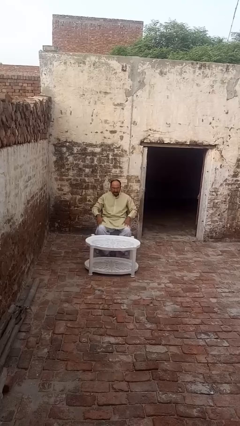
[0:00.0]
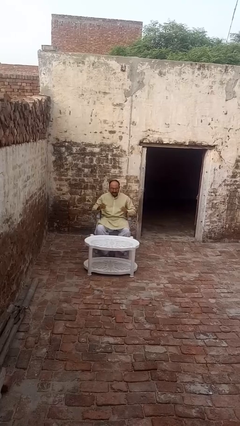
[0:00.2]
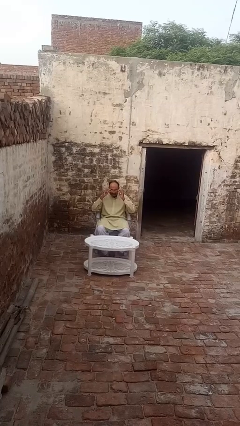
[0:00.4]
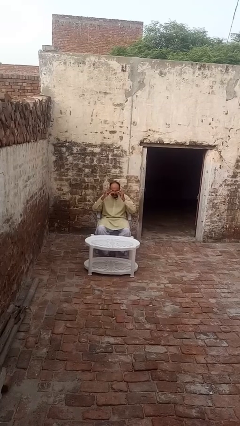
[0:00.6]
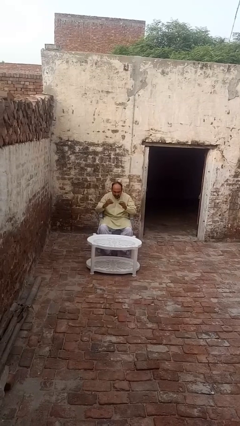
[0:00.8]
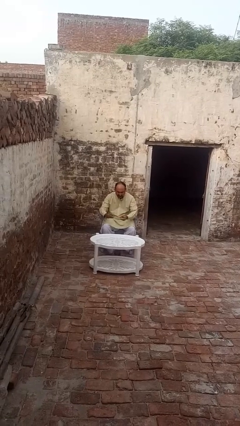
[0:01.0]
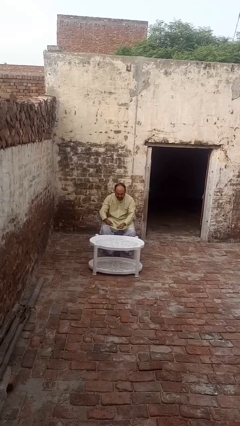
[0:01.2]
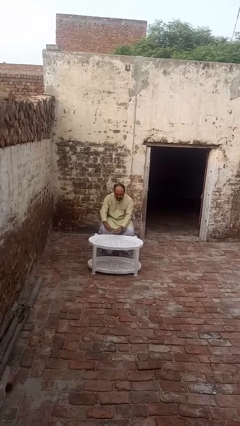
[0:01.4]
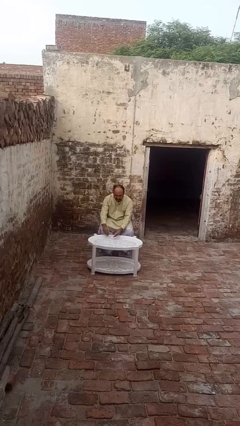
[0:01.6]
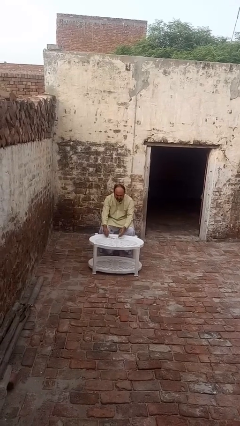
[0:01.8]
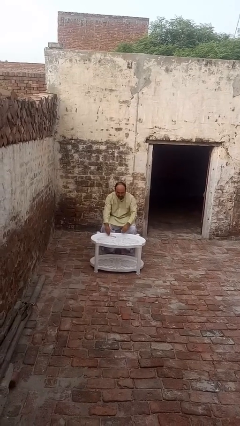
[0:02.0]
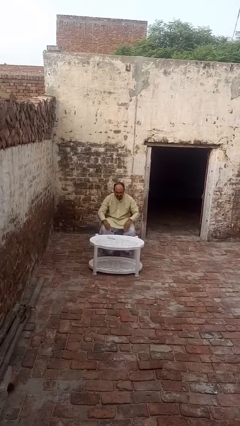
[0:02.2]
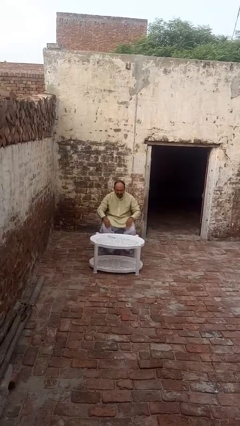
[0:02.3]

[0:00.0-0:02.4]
person takes off glasses

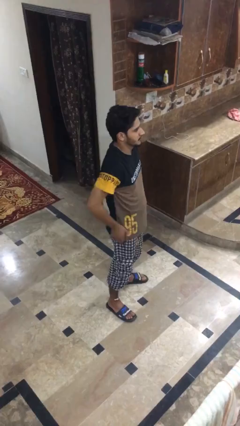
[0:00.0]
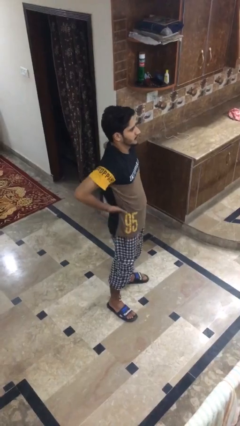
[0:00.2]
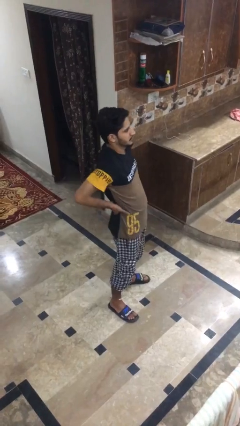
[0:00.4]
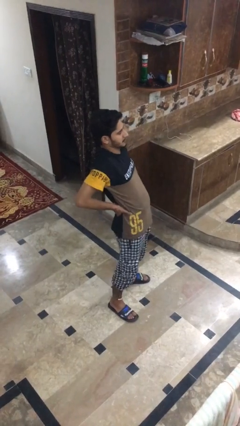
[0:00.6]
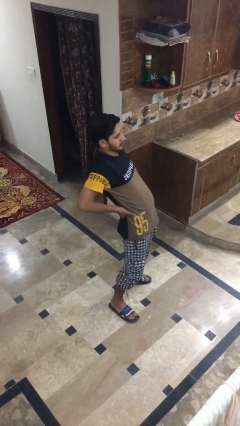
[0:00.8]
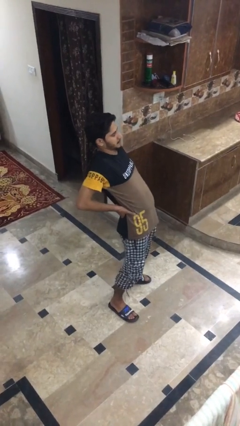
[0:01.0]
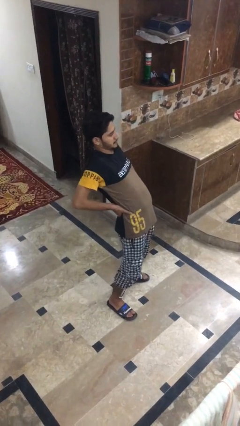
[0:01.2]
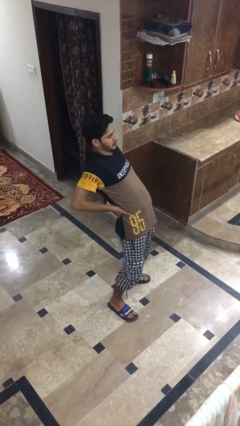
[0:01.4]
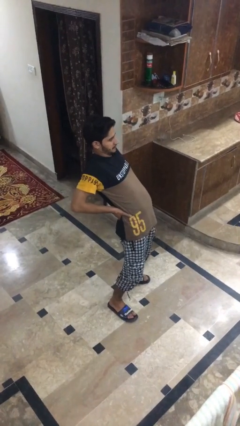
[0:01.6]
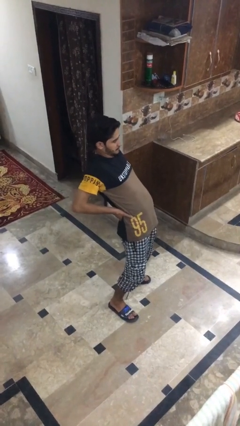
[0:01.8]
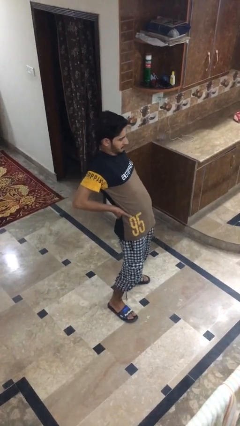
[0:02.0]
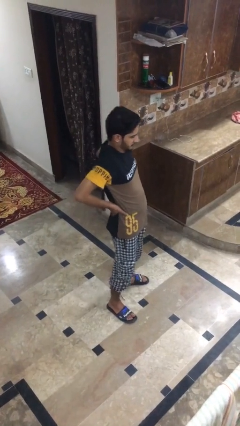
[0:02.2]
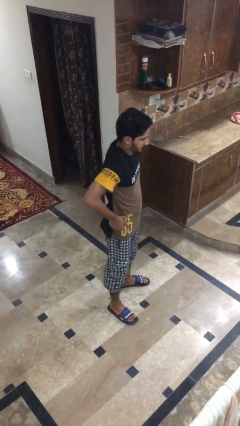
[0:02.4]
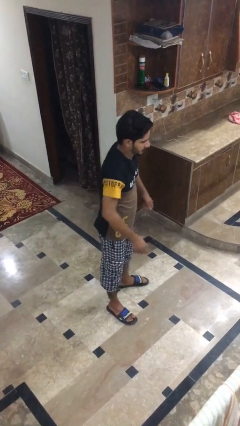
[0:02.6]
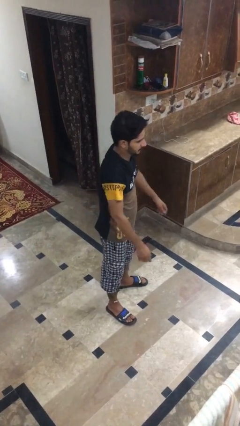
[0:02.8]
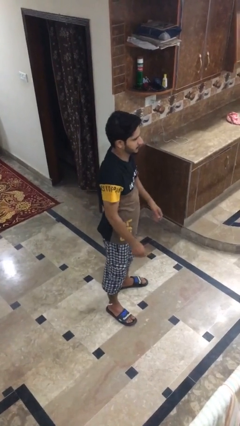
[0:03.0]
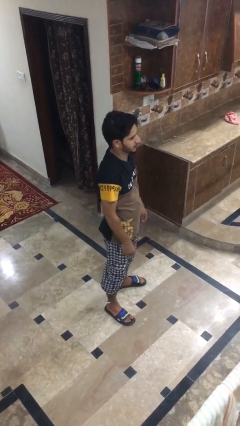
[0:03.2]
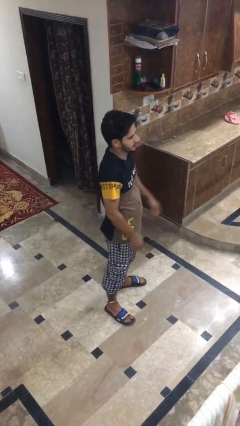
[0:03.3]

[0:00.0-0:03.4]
person stretches back

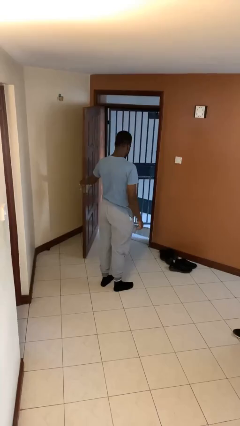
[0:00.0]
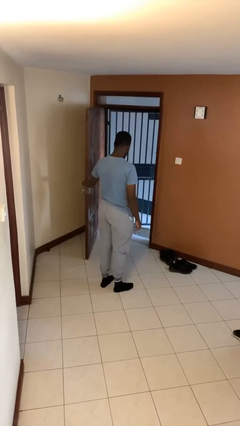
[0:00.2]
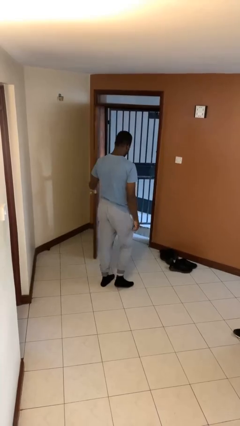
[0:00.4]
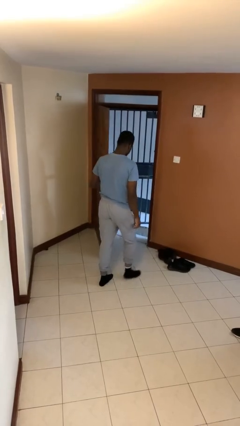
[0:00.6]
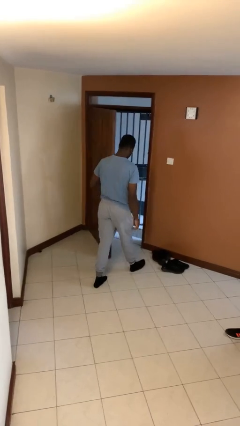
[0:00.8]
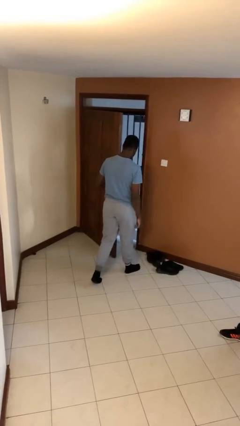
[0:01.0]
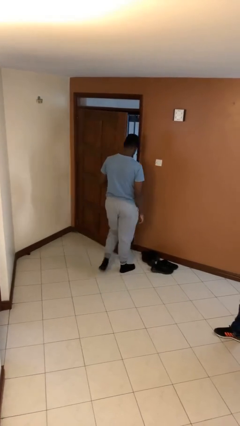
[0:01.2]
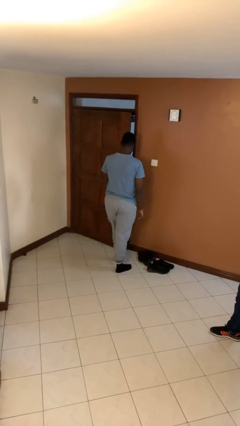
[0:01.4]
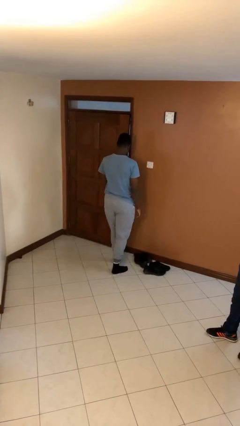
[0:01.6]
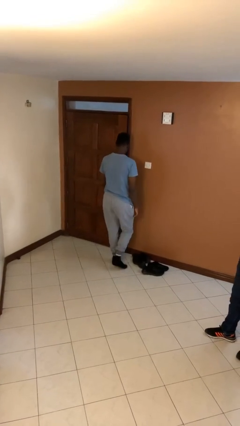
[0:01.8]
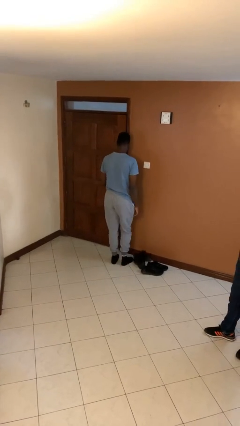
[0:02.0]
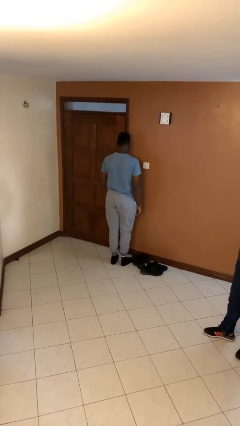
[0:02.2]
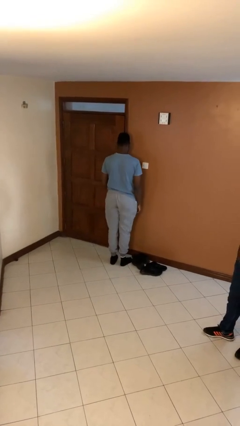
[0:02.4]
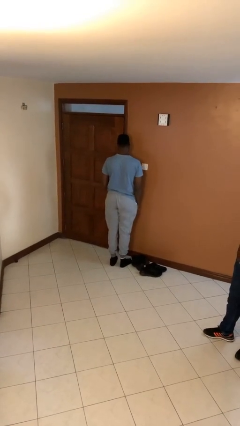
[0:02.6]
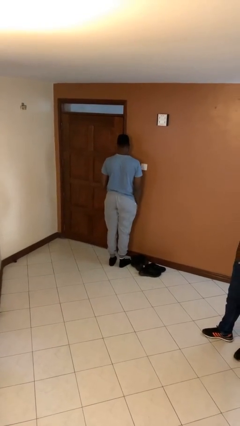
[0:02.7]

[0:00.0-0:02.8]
person closes facility door

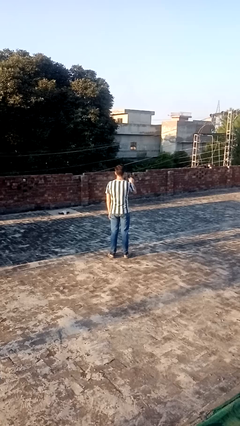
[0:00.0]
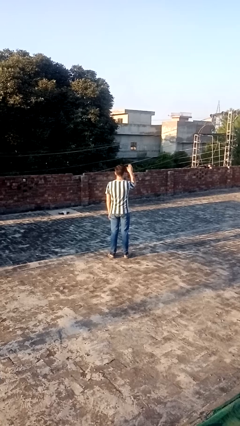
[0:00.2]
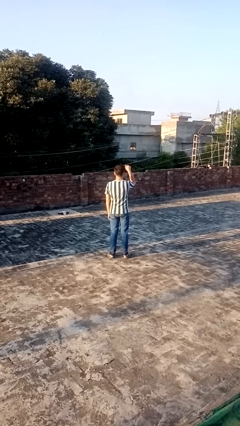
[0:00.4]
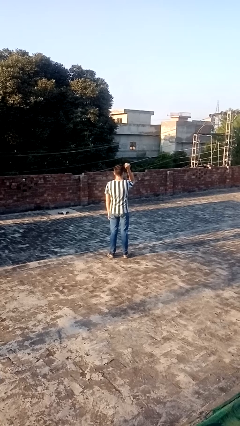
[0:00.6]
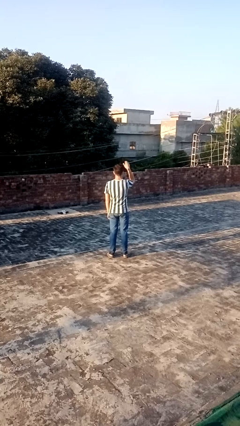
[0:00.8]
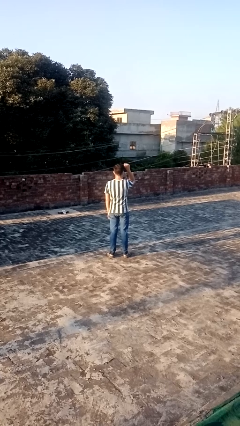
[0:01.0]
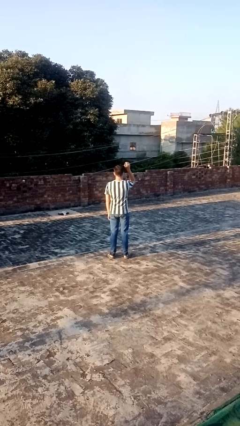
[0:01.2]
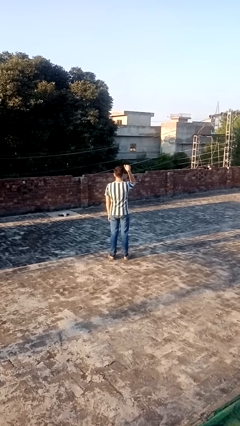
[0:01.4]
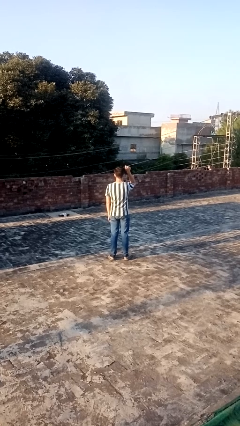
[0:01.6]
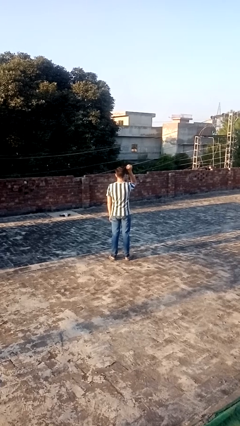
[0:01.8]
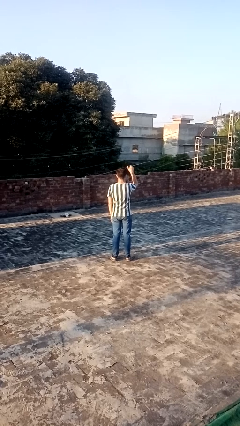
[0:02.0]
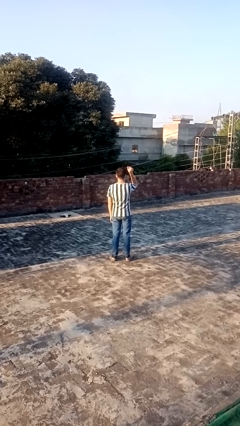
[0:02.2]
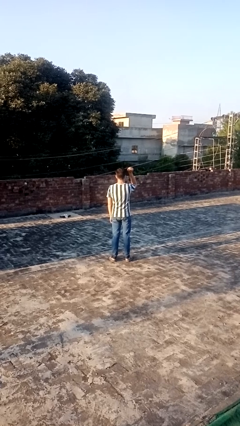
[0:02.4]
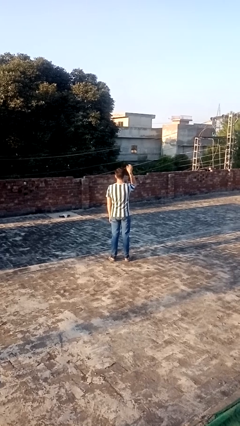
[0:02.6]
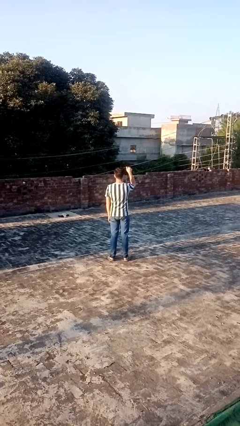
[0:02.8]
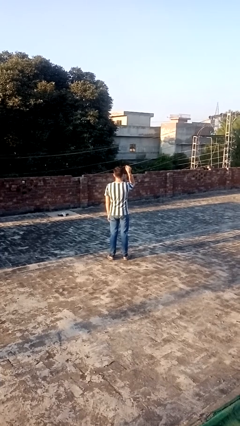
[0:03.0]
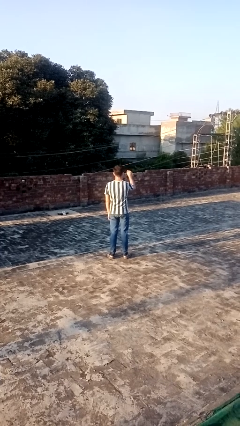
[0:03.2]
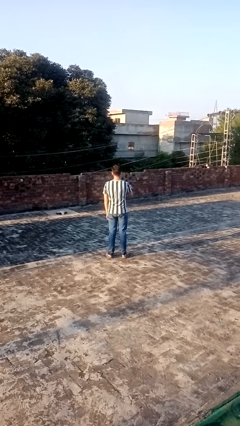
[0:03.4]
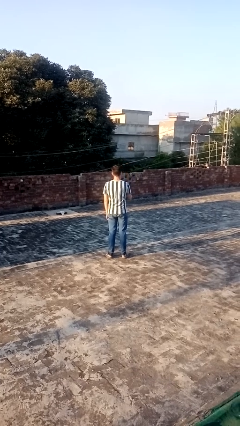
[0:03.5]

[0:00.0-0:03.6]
person gestures come here

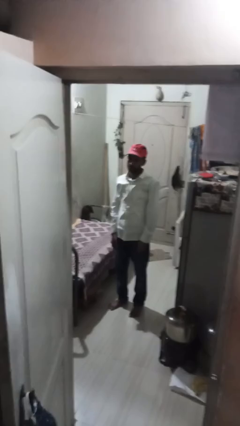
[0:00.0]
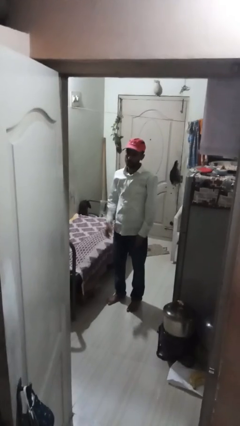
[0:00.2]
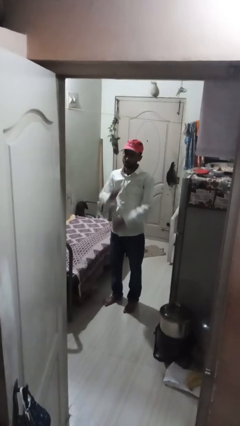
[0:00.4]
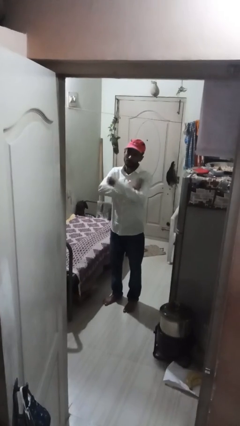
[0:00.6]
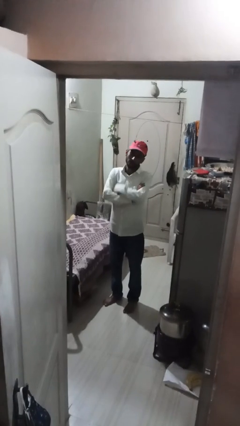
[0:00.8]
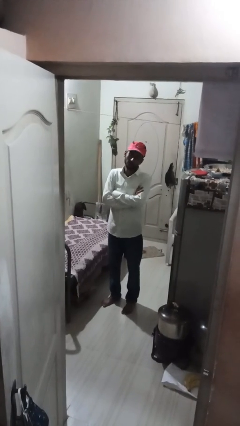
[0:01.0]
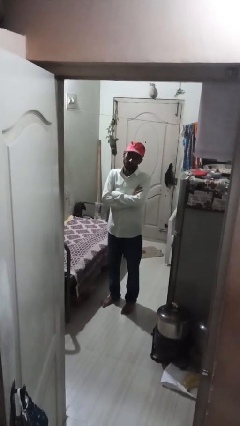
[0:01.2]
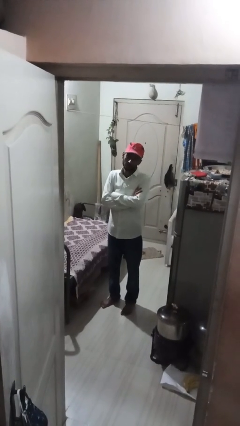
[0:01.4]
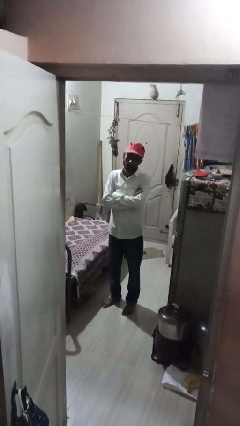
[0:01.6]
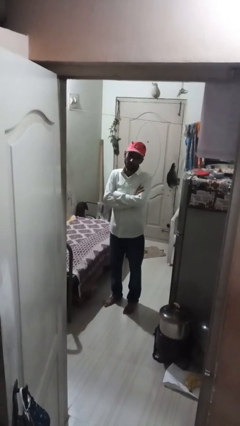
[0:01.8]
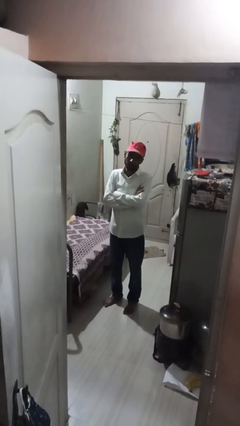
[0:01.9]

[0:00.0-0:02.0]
person crosses arms

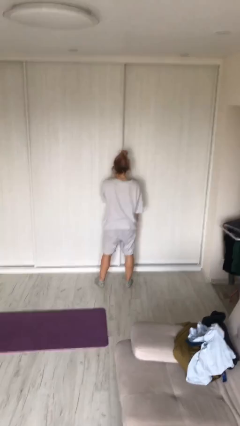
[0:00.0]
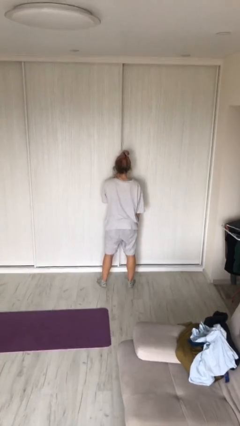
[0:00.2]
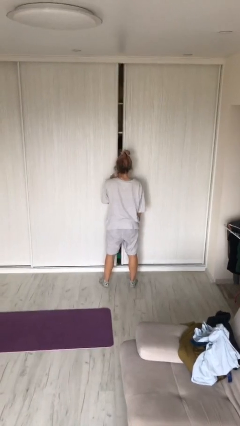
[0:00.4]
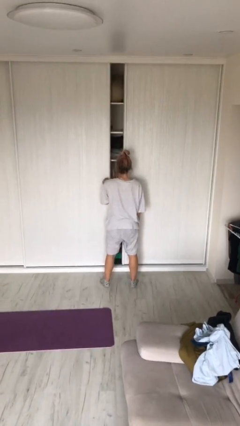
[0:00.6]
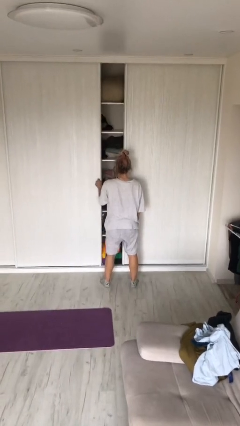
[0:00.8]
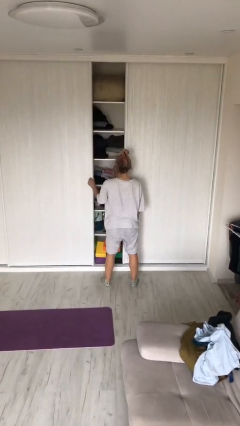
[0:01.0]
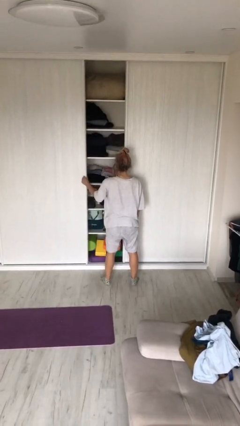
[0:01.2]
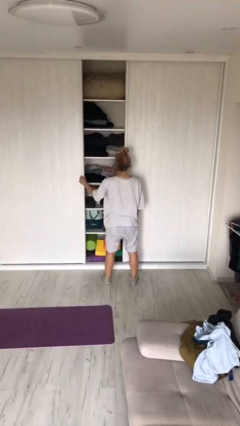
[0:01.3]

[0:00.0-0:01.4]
person opens sliding door

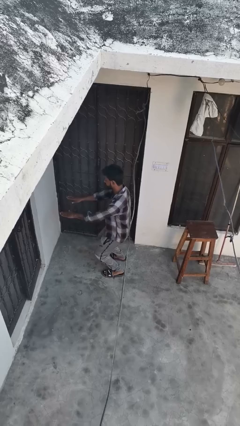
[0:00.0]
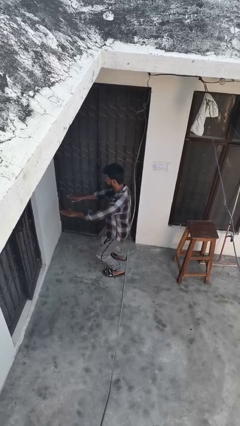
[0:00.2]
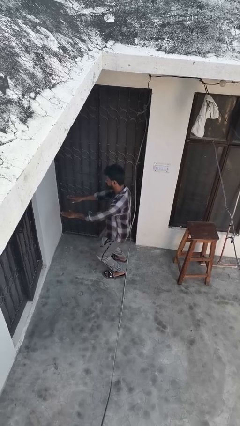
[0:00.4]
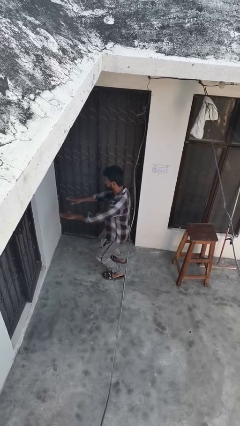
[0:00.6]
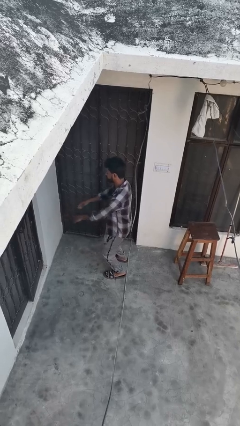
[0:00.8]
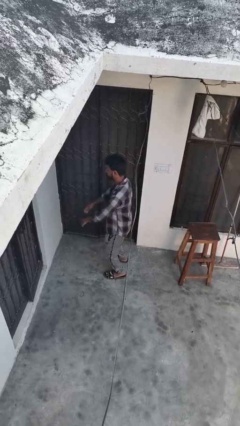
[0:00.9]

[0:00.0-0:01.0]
person squats

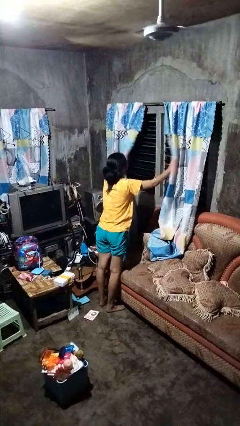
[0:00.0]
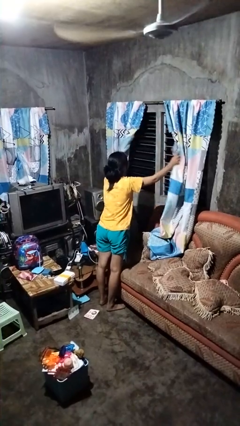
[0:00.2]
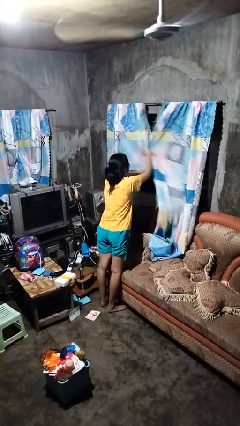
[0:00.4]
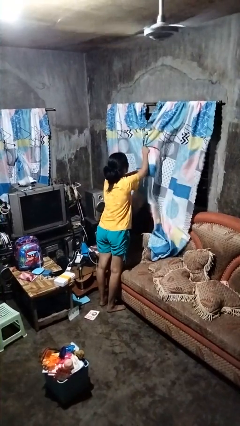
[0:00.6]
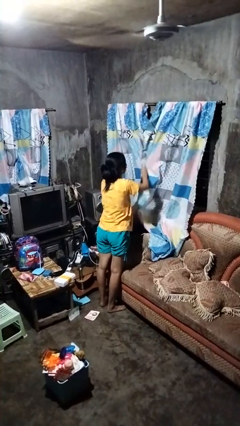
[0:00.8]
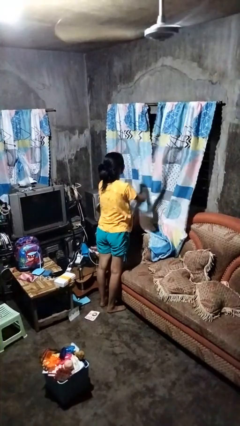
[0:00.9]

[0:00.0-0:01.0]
person closes curtains
